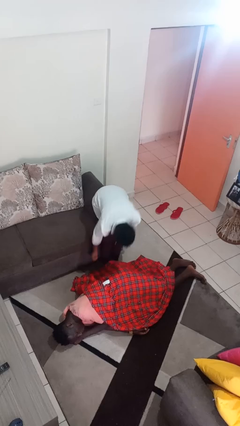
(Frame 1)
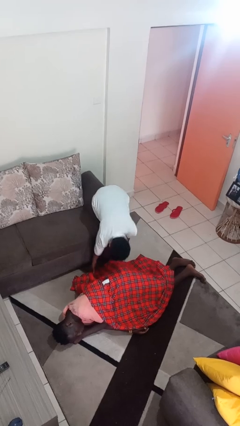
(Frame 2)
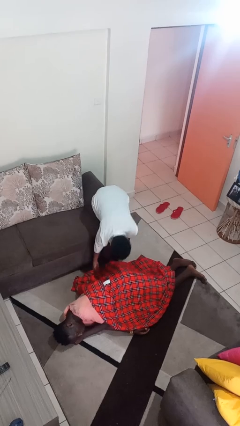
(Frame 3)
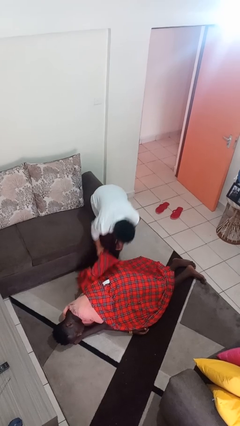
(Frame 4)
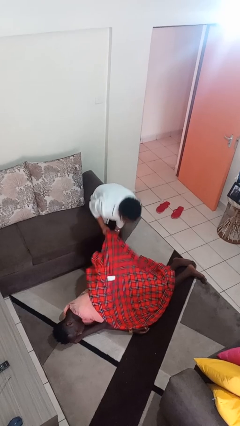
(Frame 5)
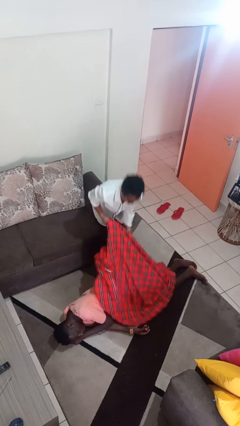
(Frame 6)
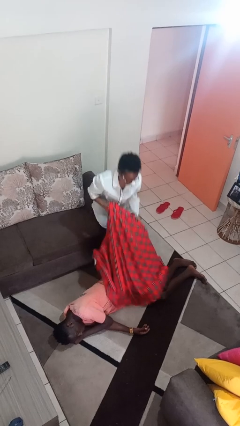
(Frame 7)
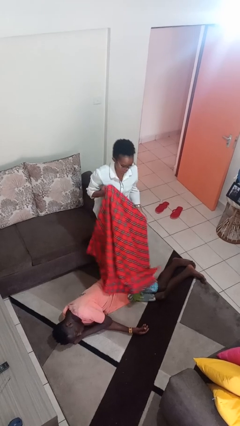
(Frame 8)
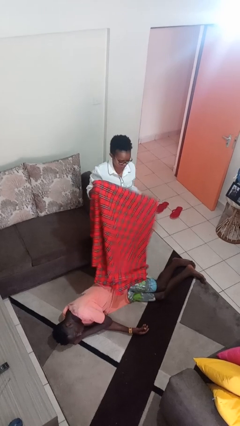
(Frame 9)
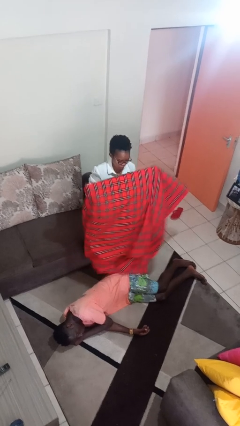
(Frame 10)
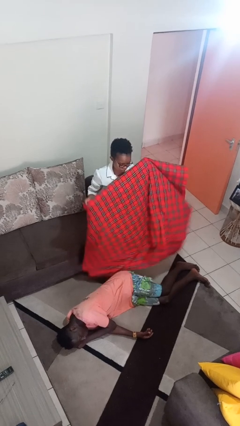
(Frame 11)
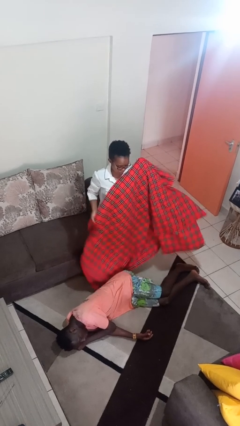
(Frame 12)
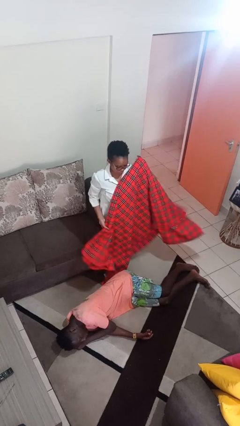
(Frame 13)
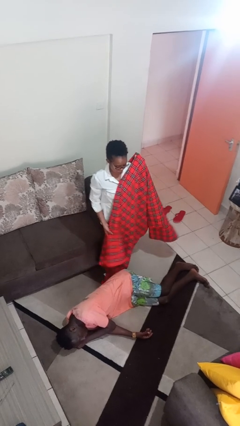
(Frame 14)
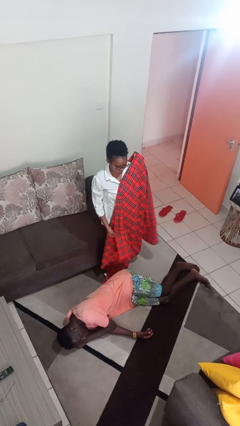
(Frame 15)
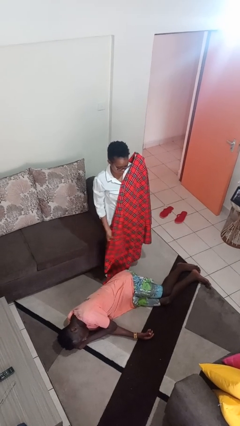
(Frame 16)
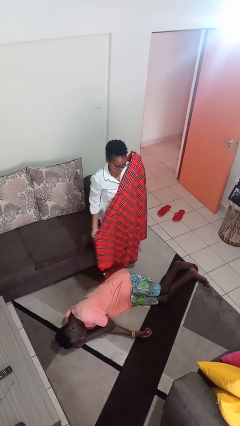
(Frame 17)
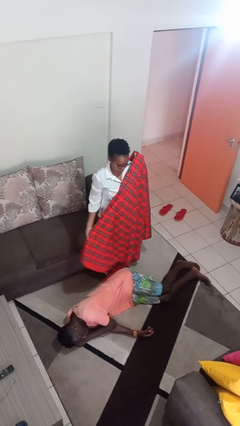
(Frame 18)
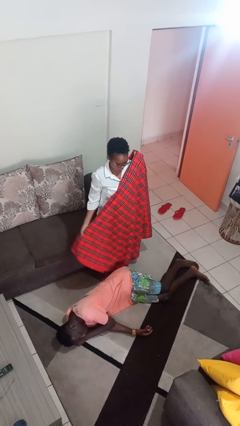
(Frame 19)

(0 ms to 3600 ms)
person uncovers friend with blanket

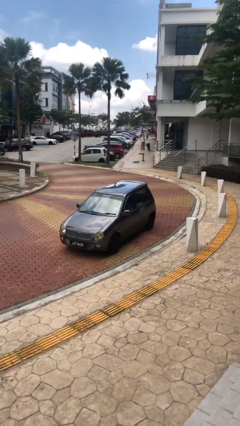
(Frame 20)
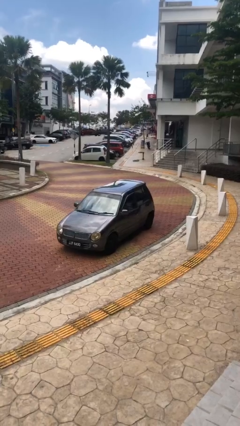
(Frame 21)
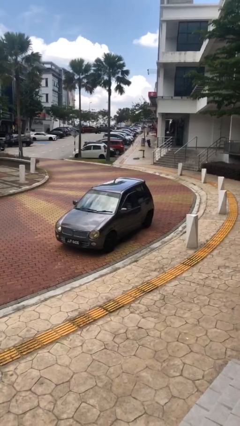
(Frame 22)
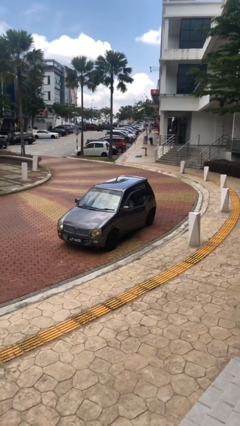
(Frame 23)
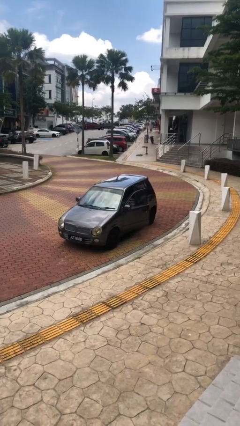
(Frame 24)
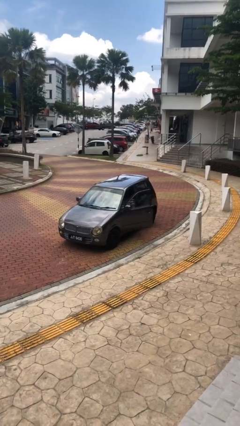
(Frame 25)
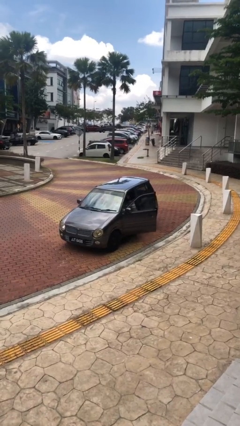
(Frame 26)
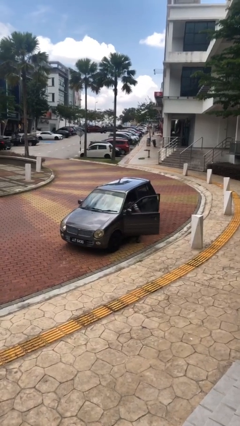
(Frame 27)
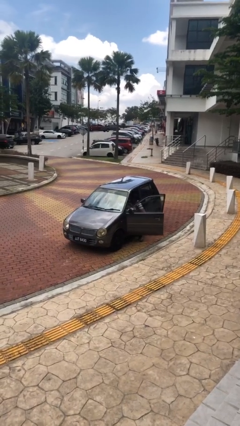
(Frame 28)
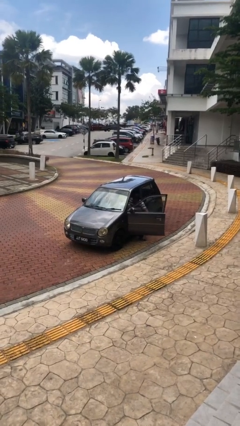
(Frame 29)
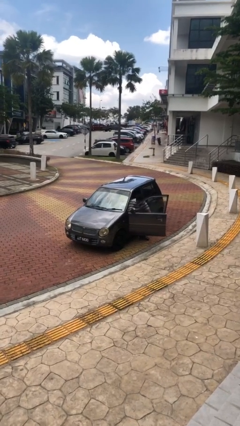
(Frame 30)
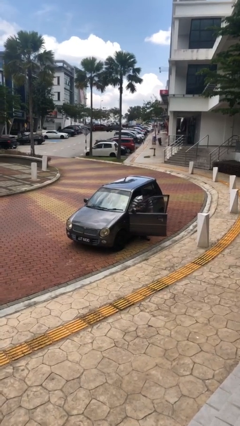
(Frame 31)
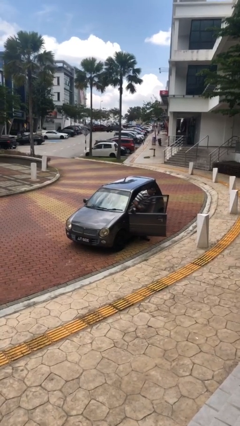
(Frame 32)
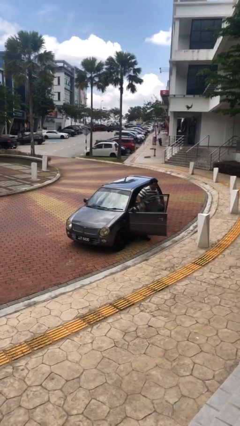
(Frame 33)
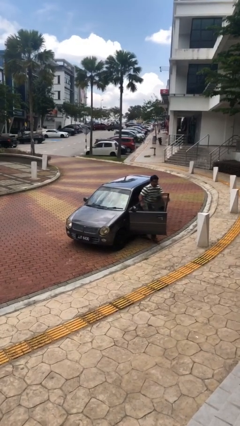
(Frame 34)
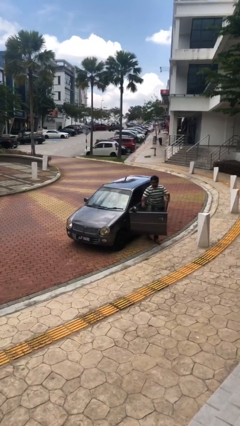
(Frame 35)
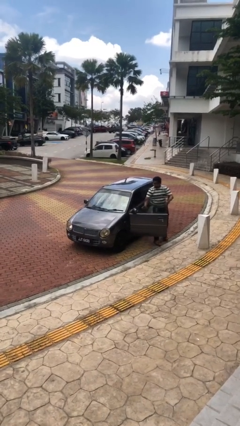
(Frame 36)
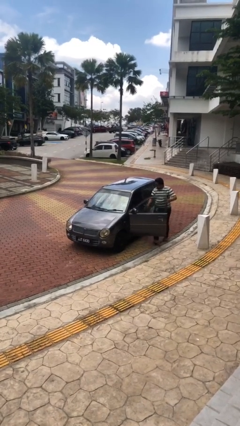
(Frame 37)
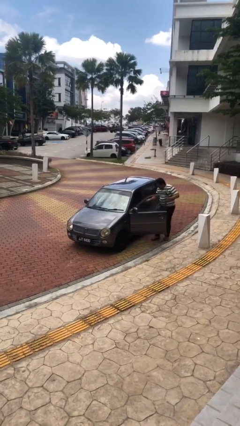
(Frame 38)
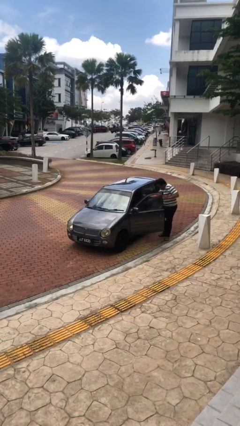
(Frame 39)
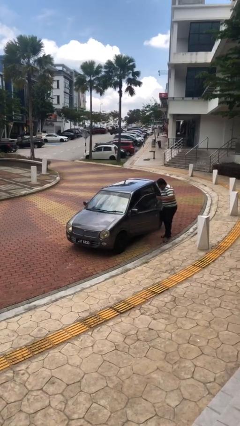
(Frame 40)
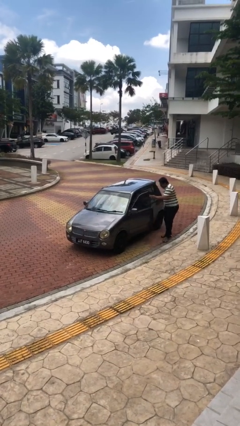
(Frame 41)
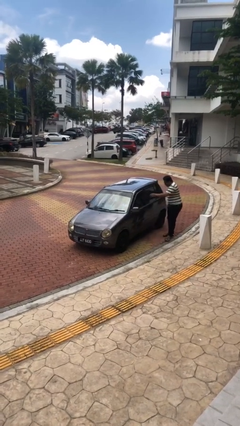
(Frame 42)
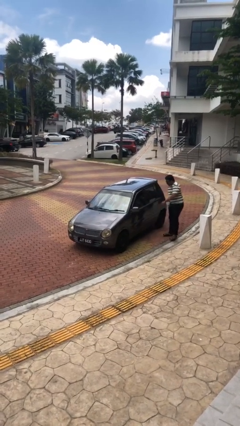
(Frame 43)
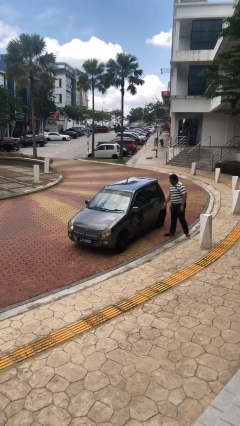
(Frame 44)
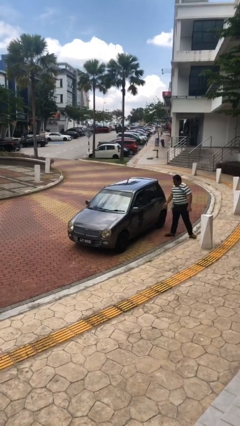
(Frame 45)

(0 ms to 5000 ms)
car drops off person

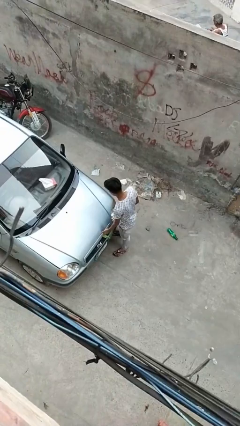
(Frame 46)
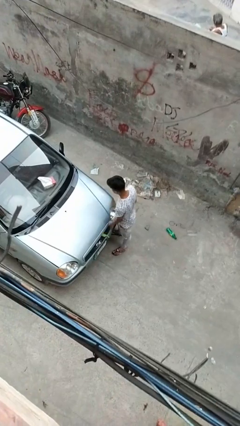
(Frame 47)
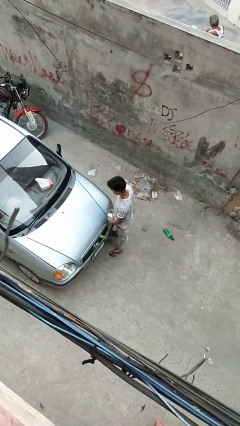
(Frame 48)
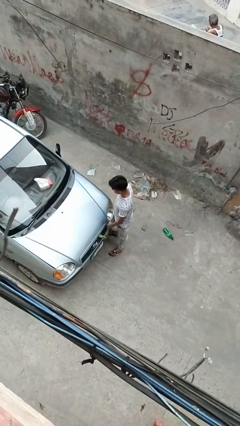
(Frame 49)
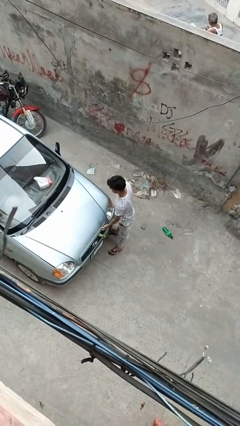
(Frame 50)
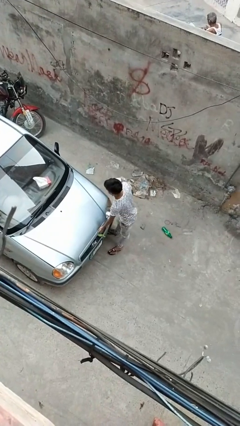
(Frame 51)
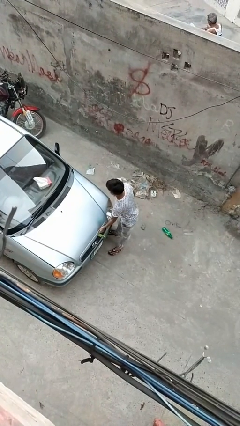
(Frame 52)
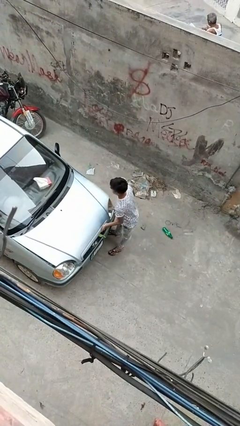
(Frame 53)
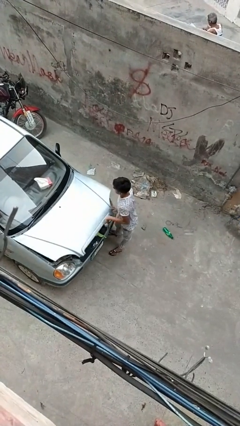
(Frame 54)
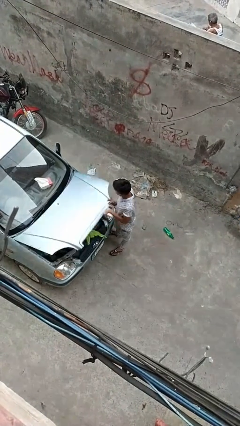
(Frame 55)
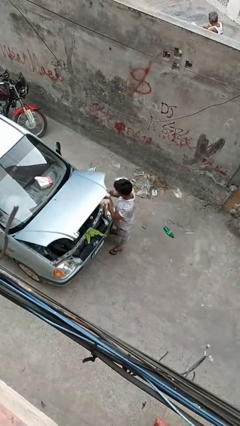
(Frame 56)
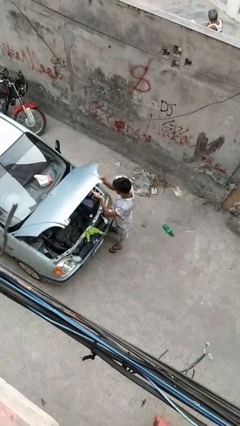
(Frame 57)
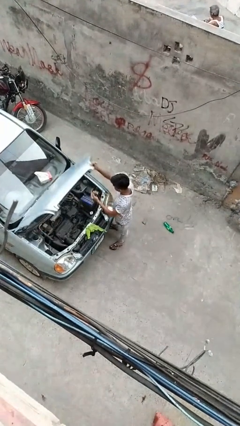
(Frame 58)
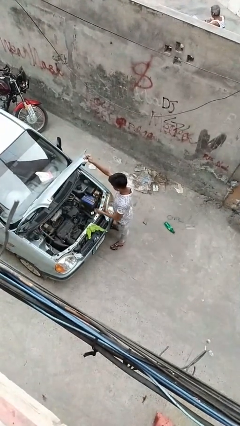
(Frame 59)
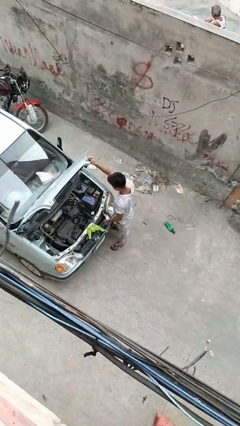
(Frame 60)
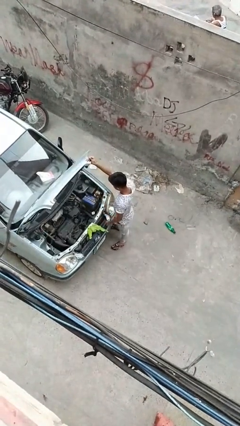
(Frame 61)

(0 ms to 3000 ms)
person opens car hood

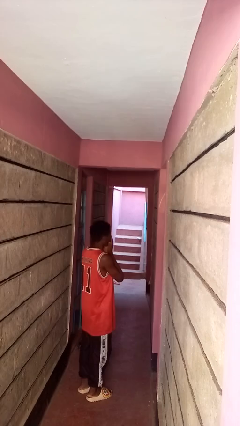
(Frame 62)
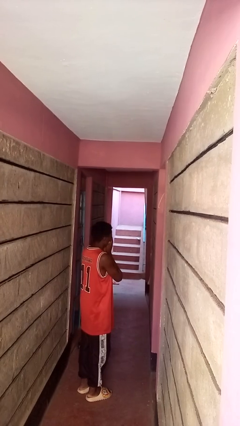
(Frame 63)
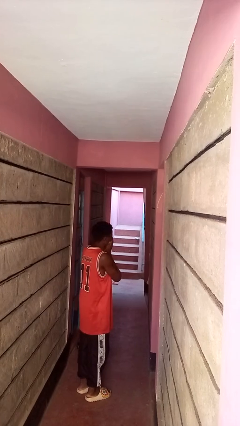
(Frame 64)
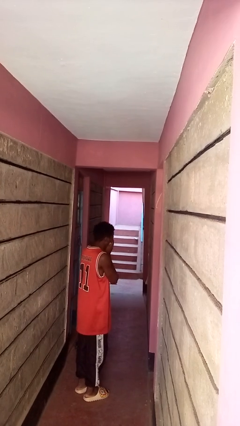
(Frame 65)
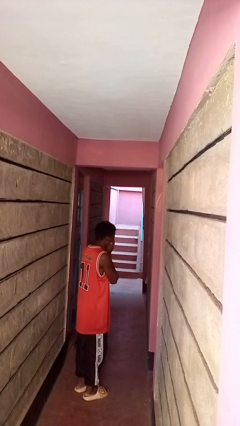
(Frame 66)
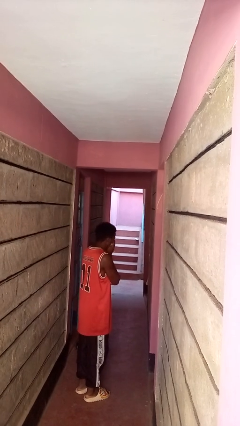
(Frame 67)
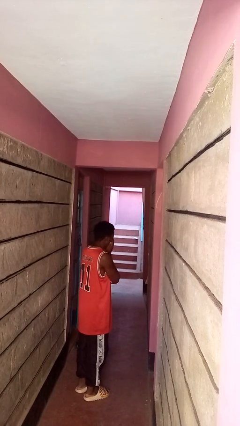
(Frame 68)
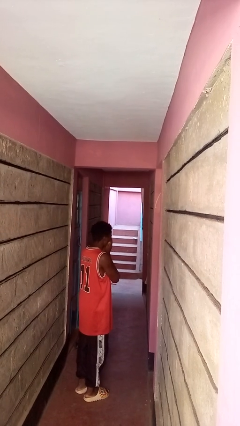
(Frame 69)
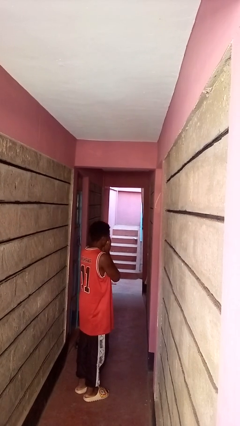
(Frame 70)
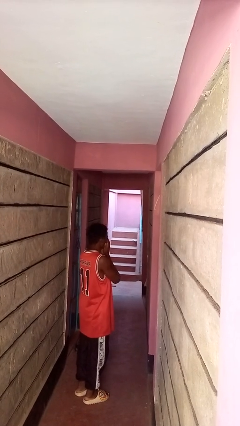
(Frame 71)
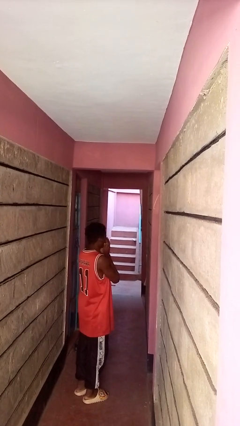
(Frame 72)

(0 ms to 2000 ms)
person sneezes into hand

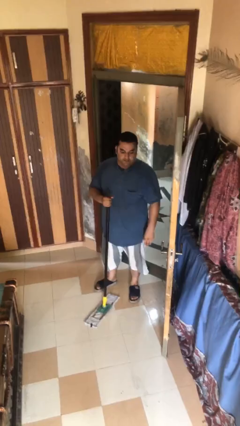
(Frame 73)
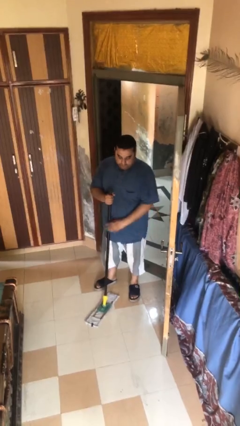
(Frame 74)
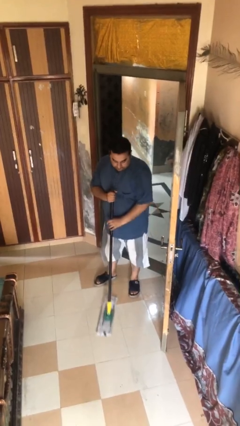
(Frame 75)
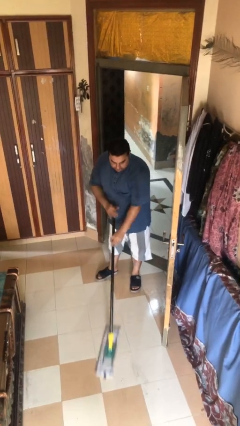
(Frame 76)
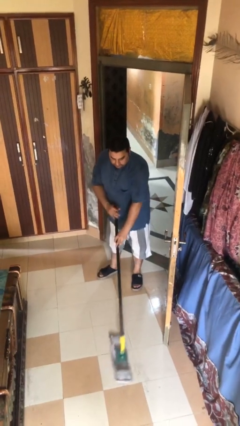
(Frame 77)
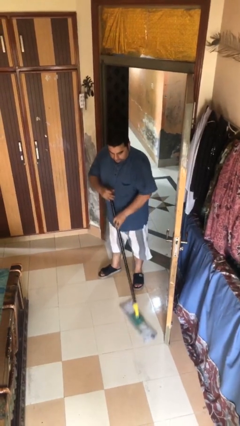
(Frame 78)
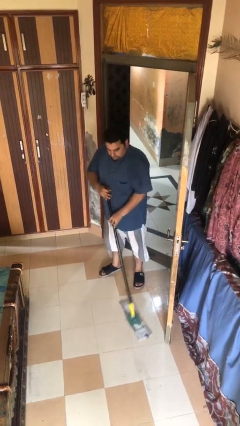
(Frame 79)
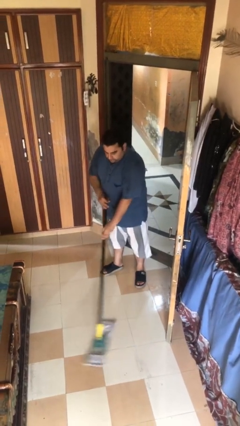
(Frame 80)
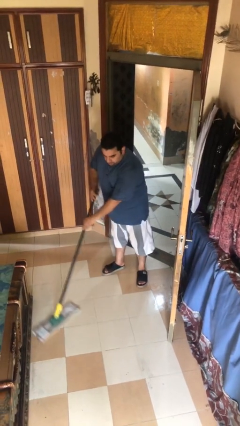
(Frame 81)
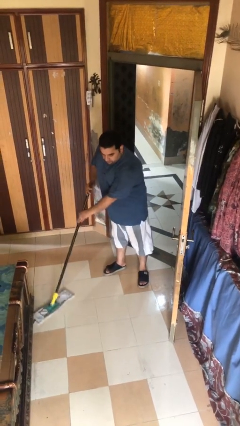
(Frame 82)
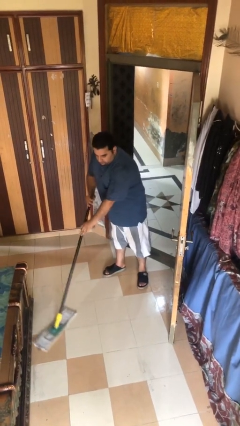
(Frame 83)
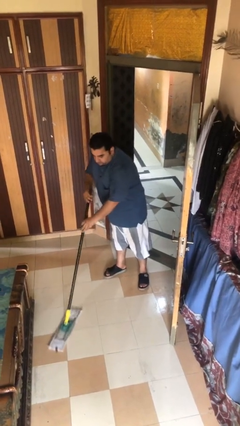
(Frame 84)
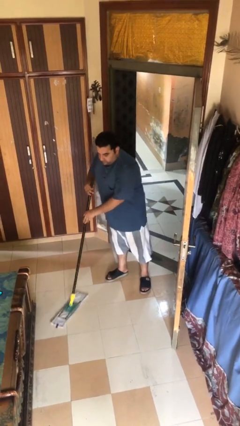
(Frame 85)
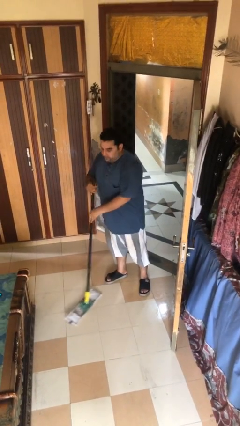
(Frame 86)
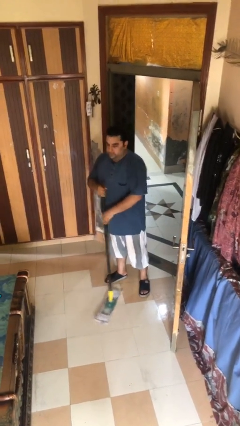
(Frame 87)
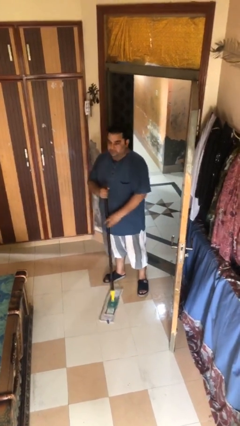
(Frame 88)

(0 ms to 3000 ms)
person mops

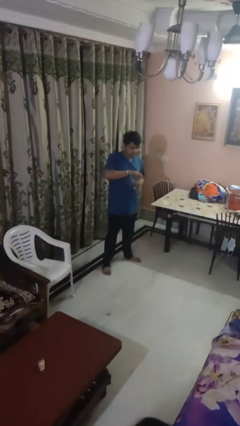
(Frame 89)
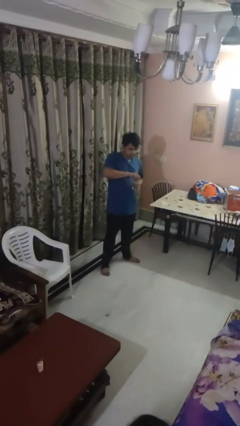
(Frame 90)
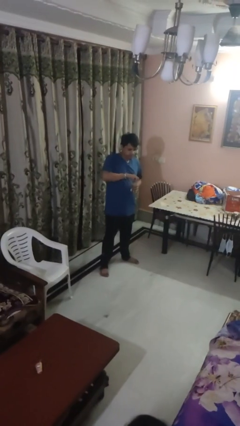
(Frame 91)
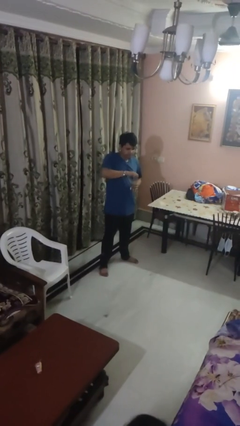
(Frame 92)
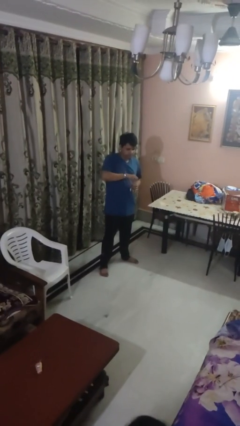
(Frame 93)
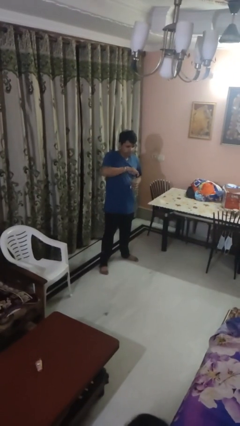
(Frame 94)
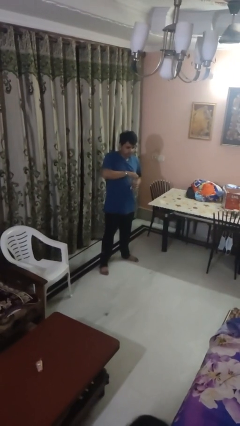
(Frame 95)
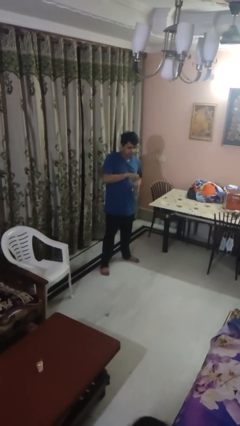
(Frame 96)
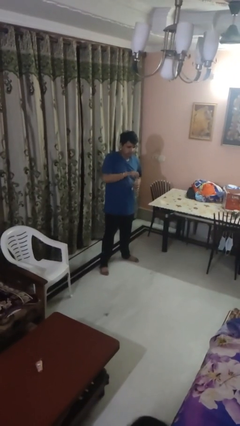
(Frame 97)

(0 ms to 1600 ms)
person screws lid to bottle
